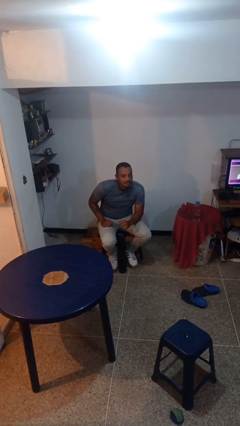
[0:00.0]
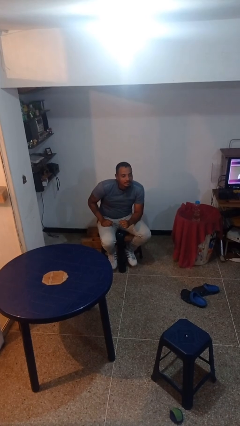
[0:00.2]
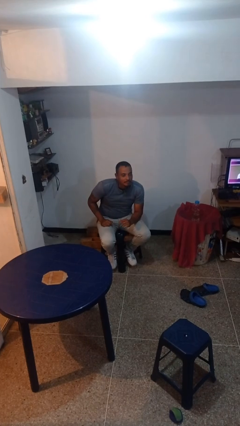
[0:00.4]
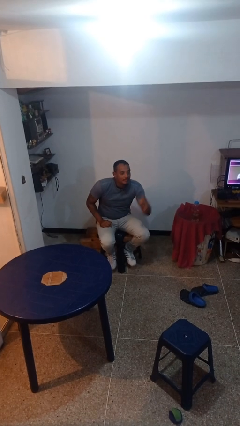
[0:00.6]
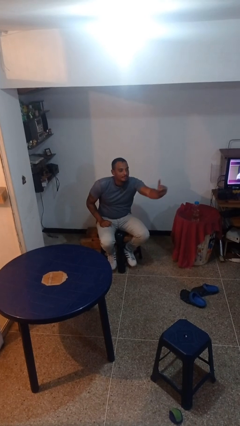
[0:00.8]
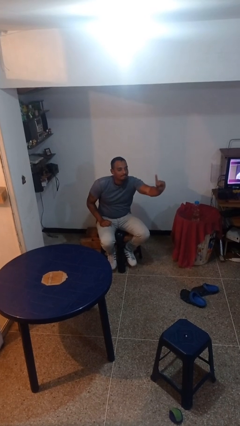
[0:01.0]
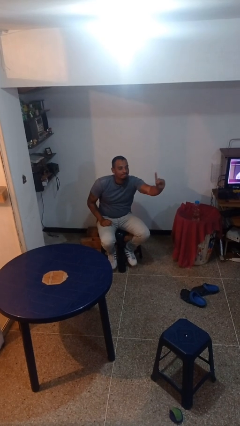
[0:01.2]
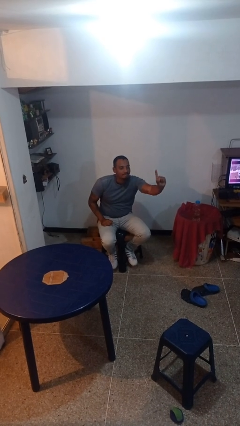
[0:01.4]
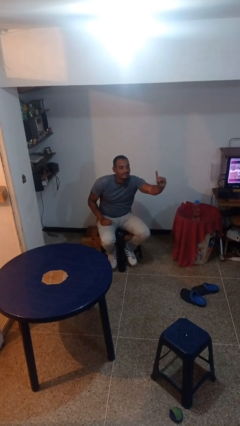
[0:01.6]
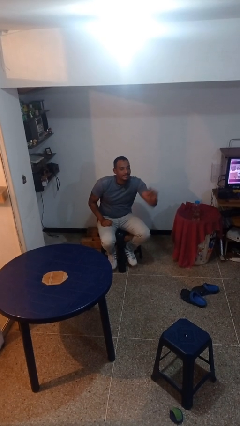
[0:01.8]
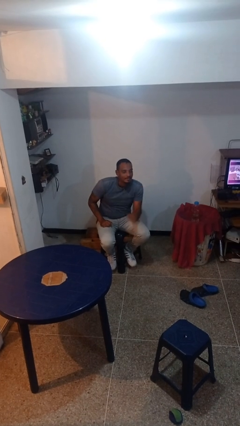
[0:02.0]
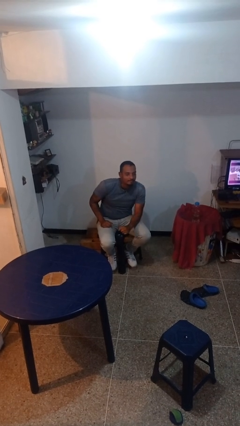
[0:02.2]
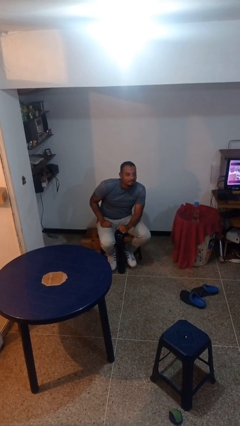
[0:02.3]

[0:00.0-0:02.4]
person gestures number one

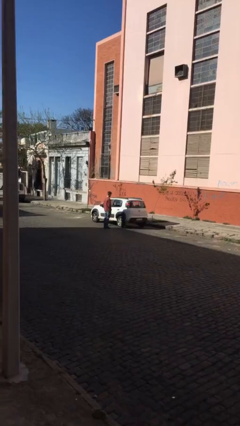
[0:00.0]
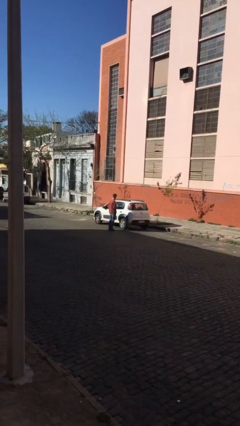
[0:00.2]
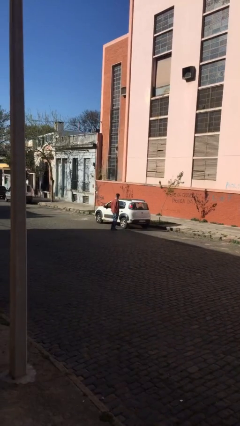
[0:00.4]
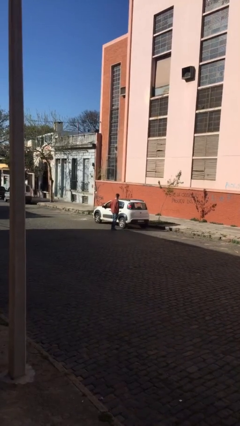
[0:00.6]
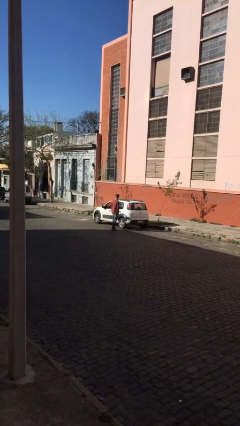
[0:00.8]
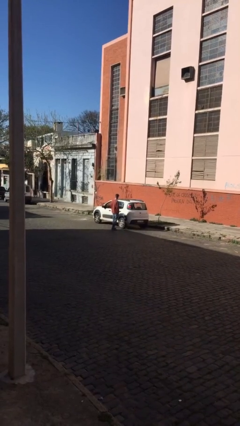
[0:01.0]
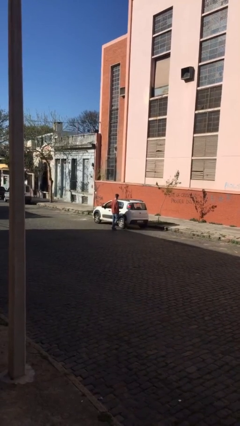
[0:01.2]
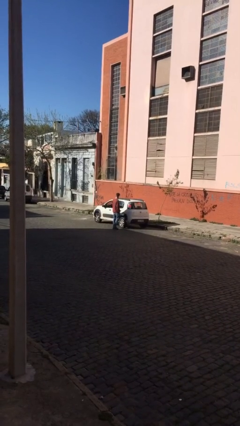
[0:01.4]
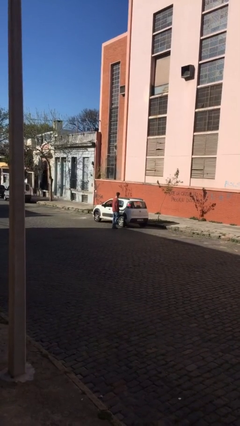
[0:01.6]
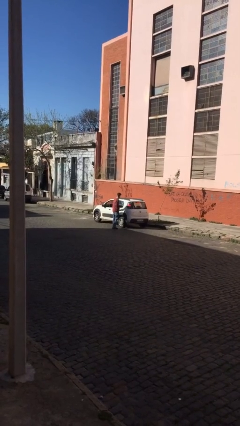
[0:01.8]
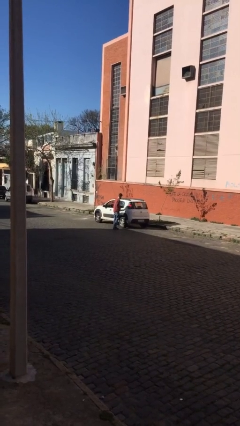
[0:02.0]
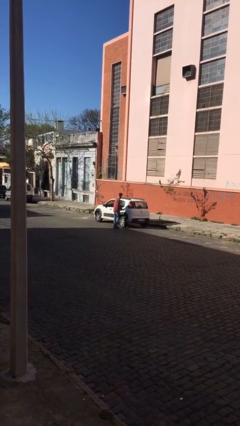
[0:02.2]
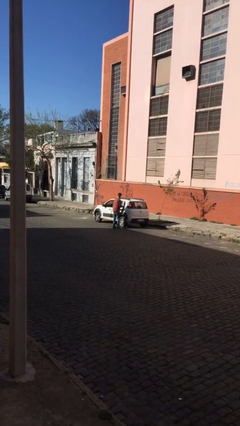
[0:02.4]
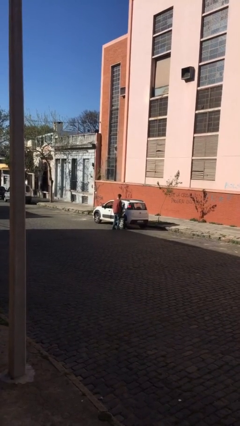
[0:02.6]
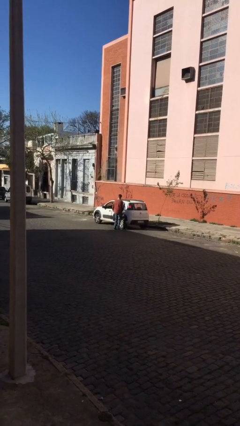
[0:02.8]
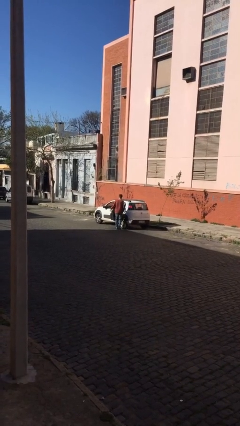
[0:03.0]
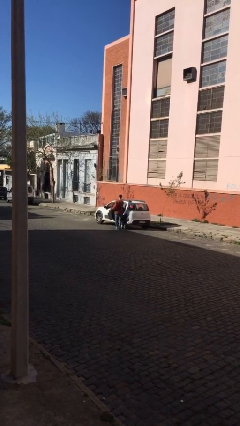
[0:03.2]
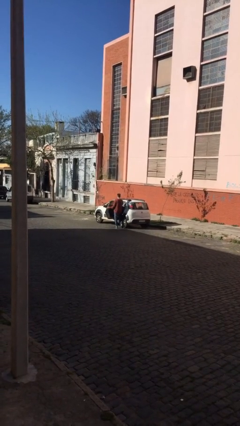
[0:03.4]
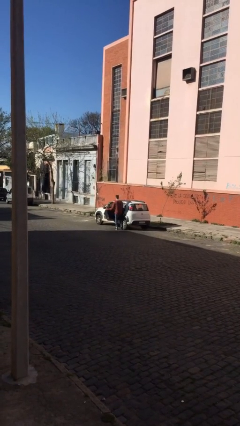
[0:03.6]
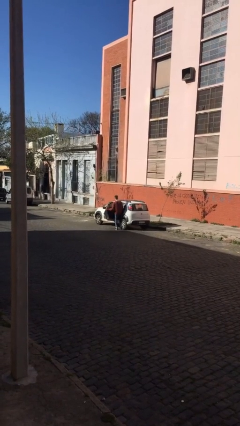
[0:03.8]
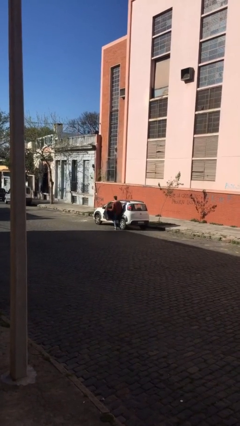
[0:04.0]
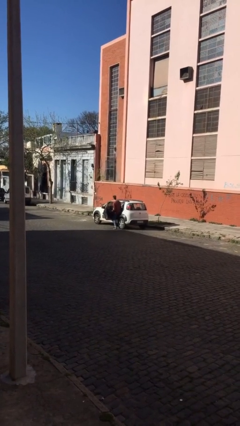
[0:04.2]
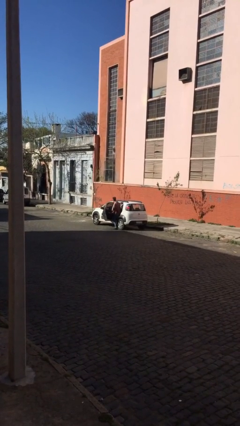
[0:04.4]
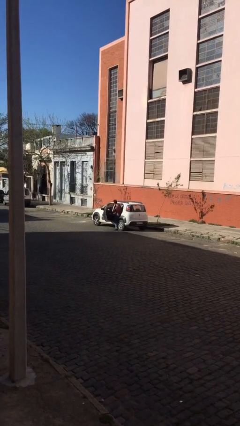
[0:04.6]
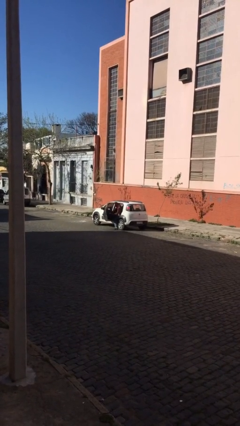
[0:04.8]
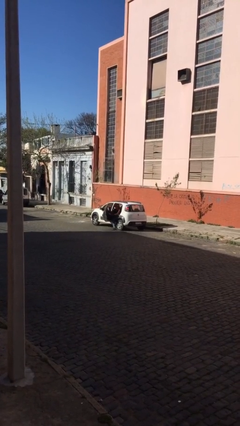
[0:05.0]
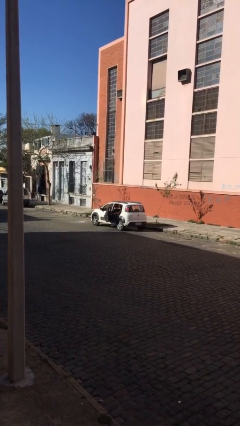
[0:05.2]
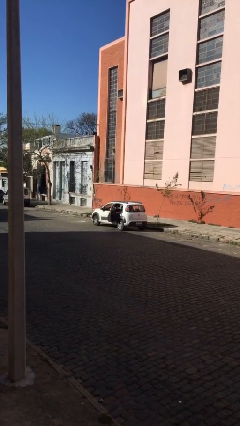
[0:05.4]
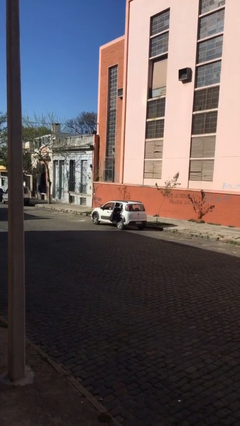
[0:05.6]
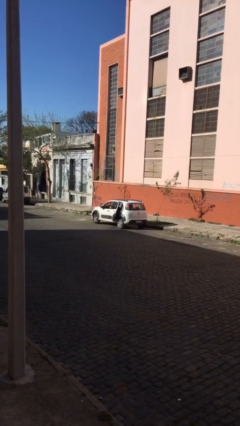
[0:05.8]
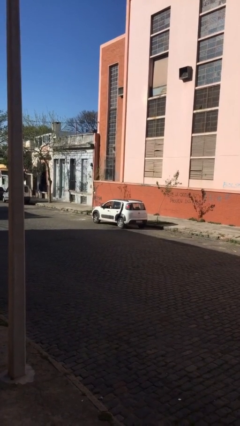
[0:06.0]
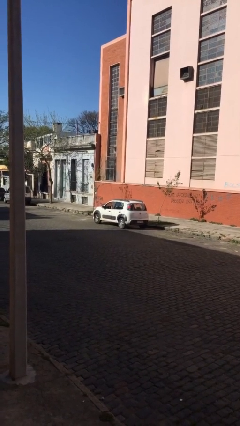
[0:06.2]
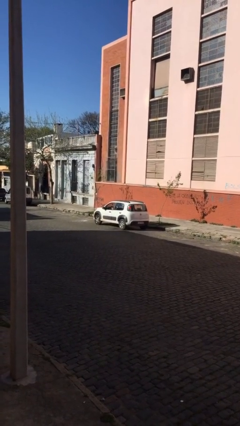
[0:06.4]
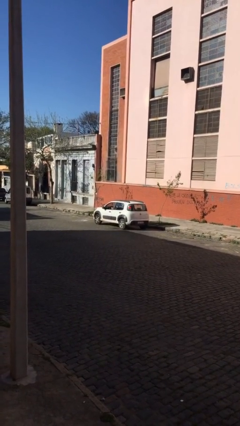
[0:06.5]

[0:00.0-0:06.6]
car picks up person

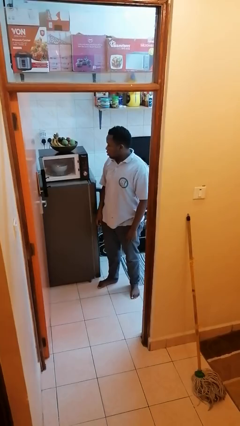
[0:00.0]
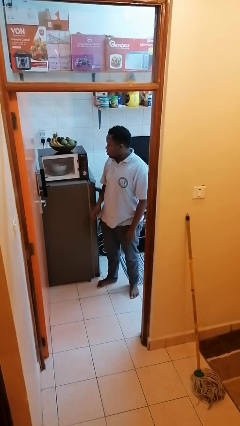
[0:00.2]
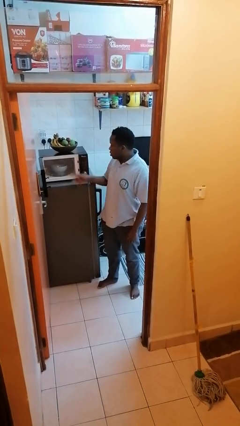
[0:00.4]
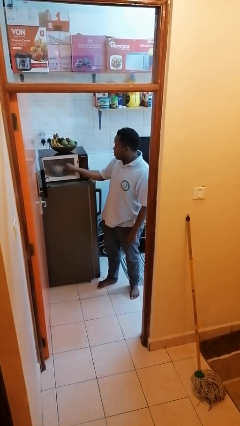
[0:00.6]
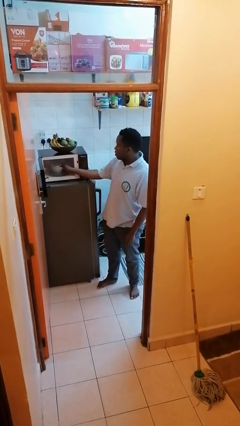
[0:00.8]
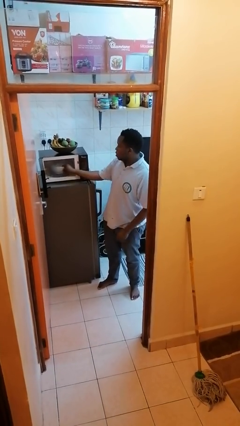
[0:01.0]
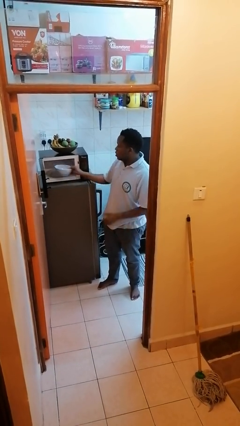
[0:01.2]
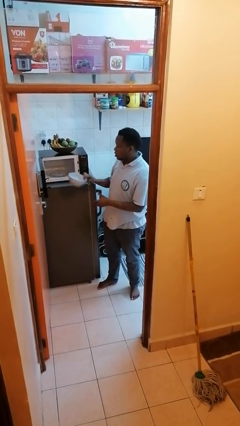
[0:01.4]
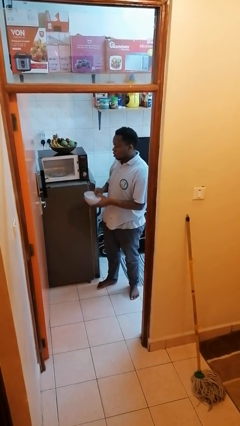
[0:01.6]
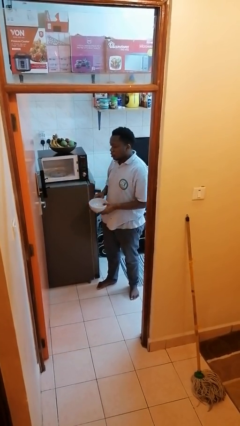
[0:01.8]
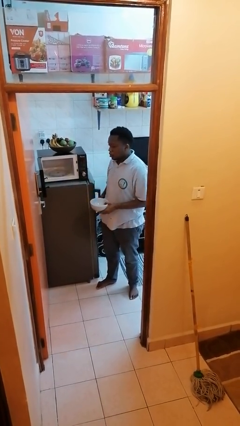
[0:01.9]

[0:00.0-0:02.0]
person takes object from microwave

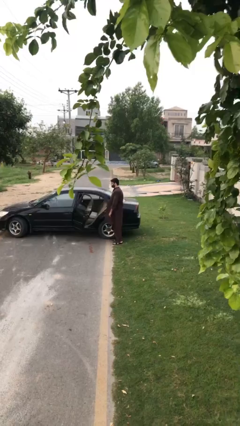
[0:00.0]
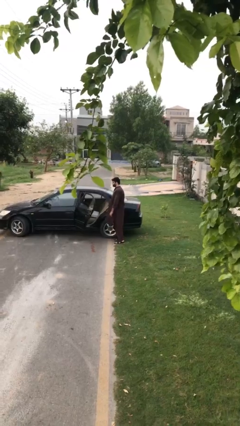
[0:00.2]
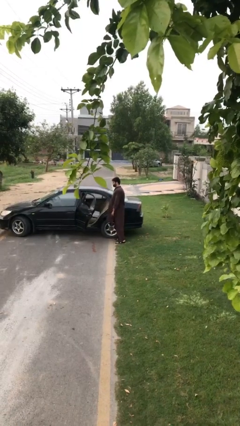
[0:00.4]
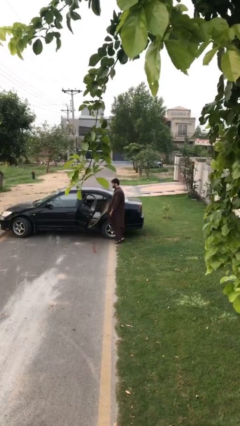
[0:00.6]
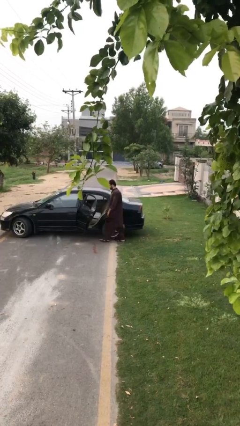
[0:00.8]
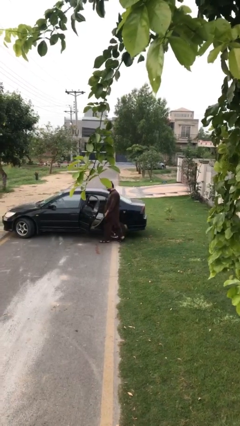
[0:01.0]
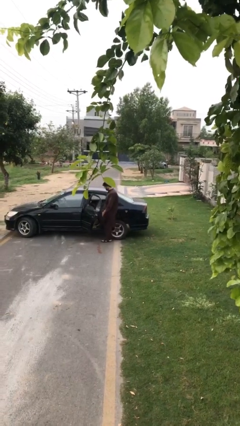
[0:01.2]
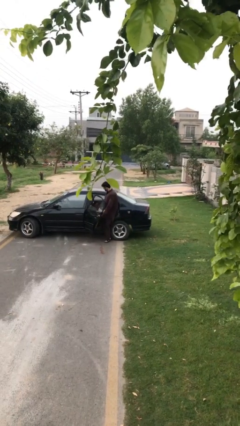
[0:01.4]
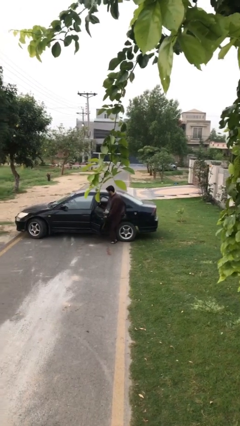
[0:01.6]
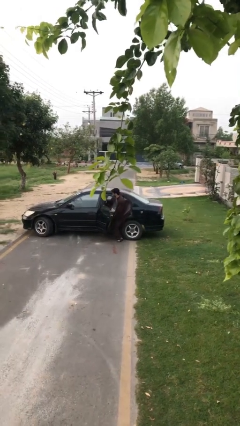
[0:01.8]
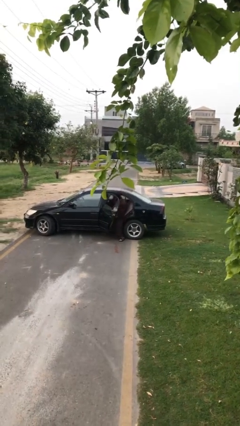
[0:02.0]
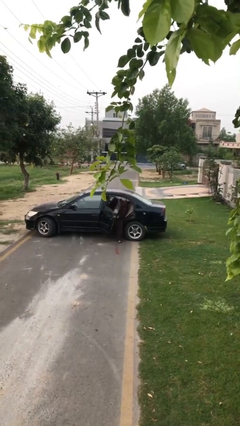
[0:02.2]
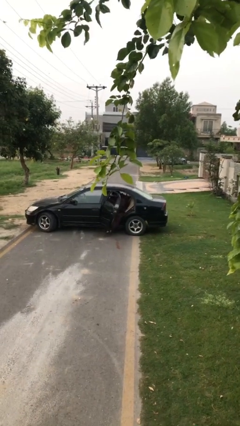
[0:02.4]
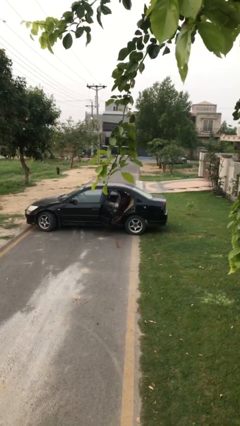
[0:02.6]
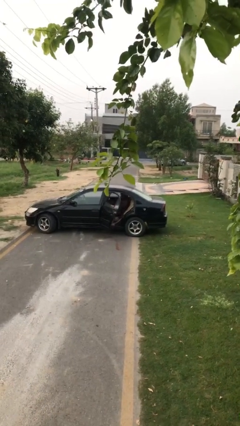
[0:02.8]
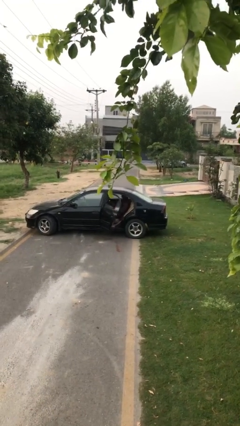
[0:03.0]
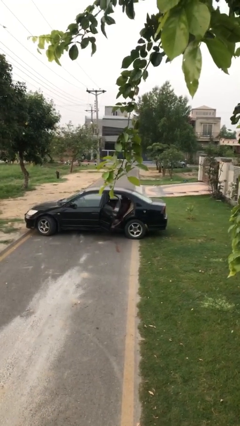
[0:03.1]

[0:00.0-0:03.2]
person enters car

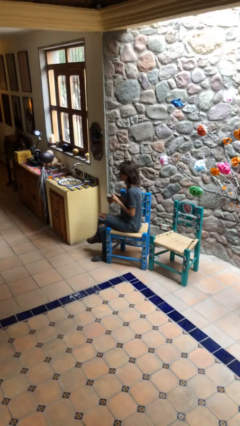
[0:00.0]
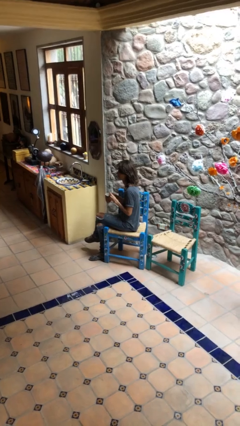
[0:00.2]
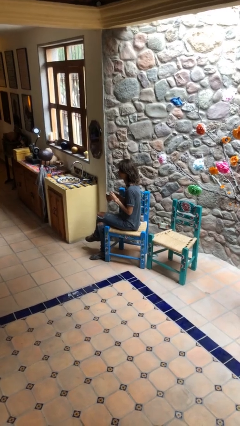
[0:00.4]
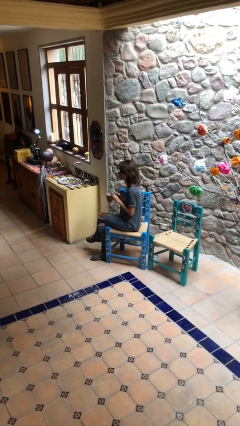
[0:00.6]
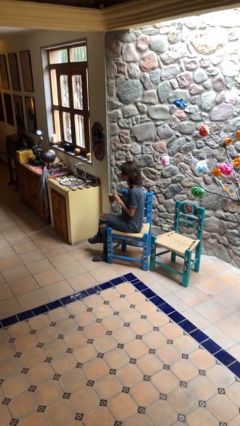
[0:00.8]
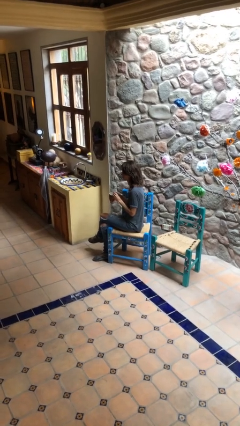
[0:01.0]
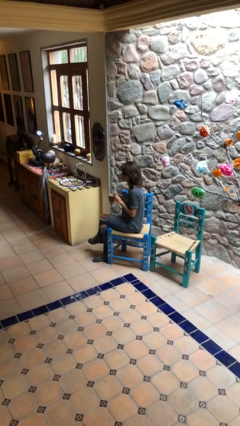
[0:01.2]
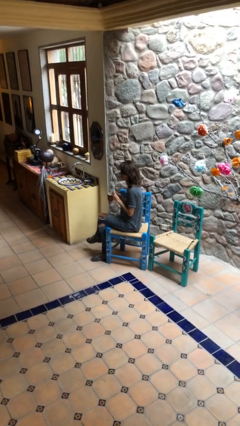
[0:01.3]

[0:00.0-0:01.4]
person stirs mug

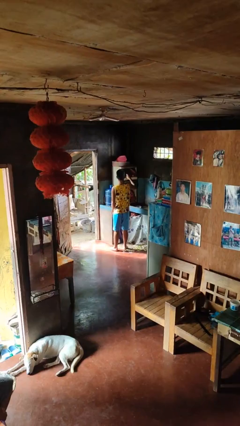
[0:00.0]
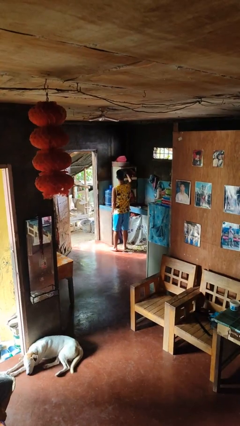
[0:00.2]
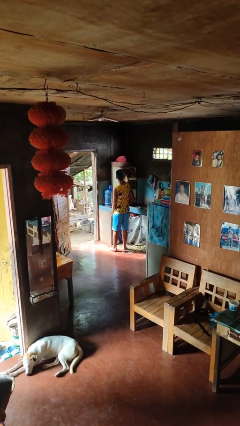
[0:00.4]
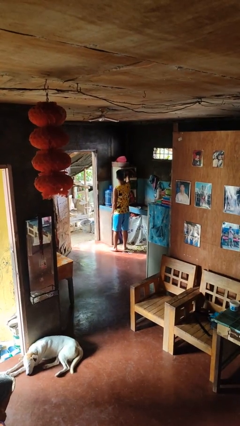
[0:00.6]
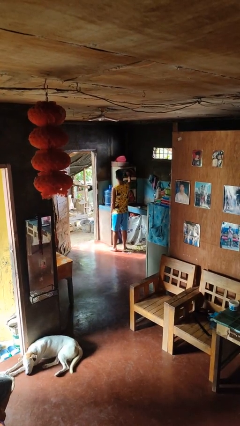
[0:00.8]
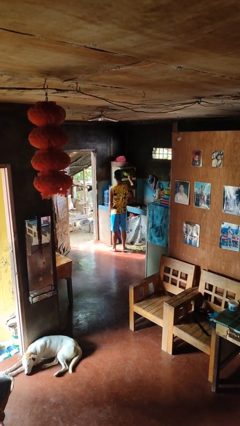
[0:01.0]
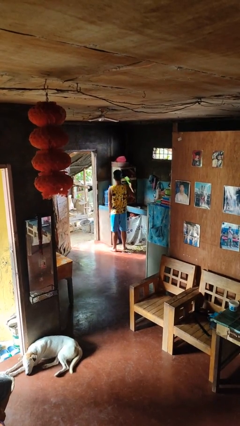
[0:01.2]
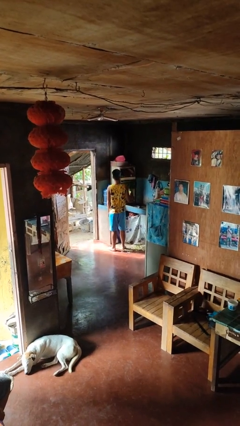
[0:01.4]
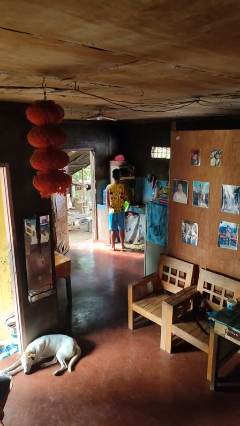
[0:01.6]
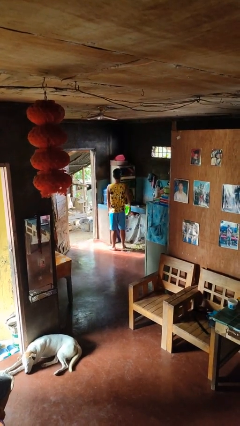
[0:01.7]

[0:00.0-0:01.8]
person takes object from cabinet

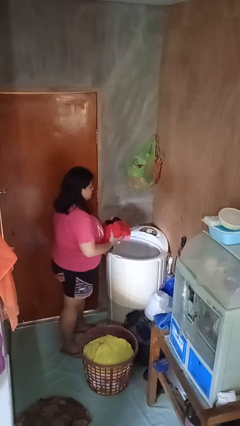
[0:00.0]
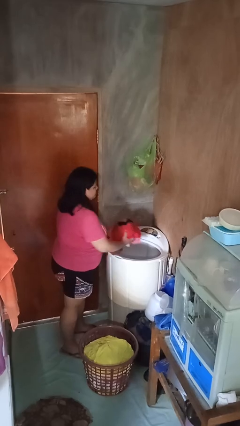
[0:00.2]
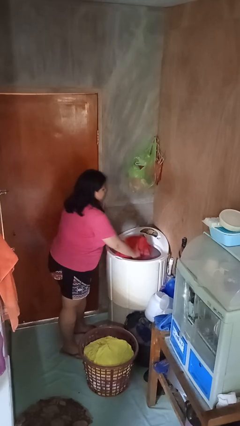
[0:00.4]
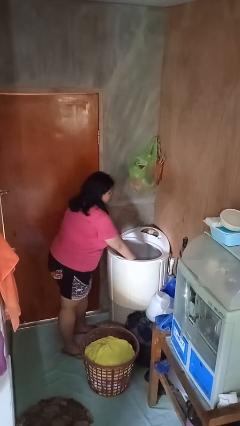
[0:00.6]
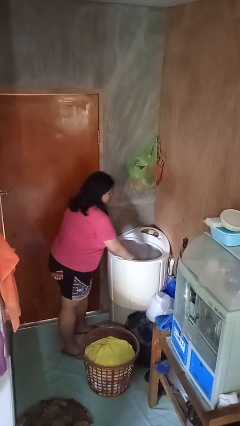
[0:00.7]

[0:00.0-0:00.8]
person loads clotheswasher
